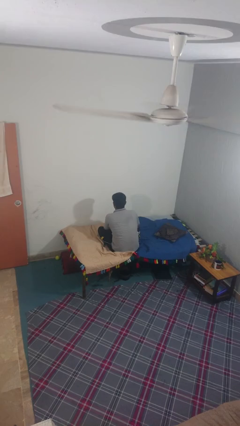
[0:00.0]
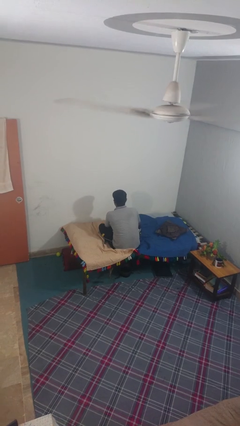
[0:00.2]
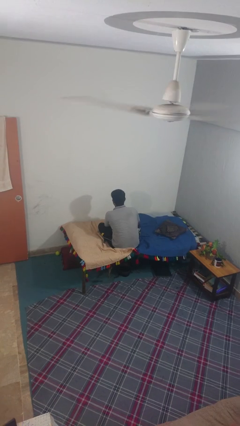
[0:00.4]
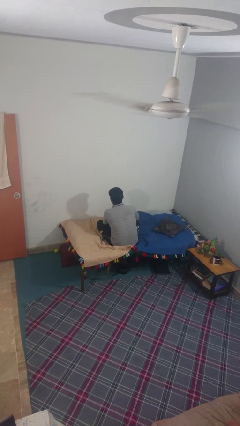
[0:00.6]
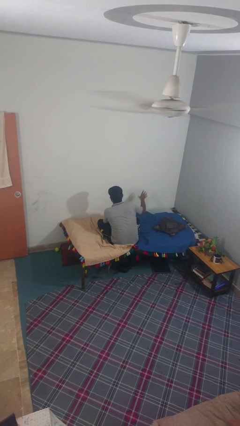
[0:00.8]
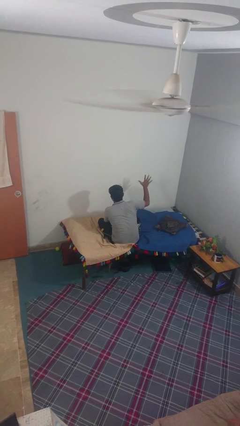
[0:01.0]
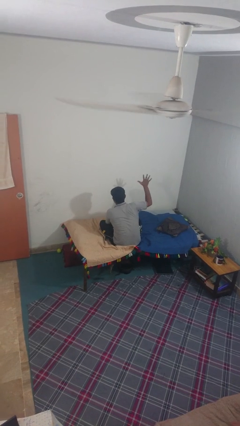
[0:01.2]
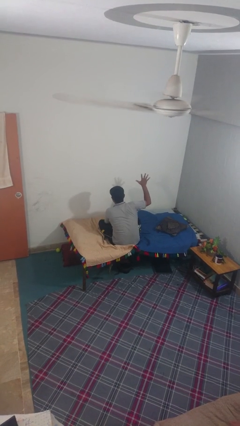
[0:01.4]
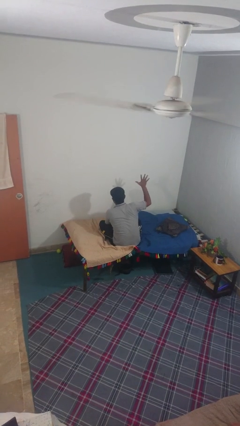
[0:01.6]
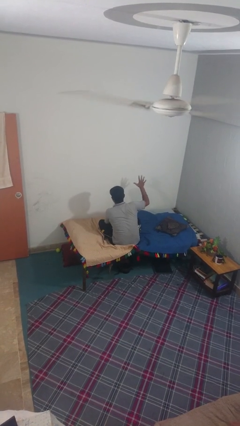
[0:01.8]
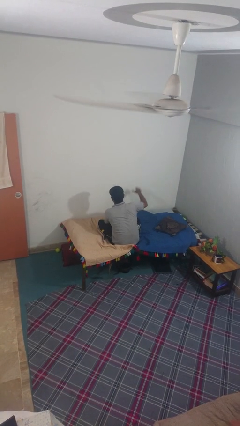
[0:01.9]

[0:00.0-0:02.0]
person gestures number five

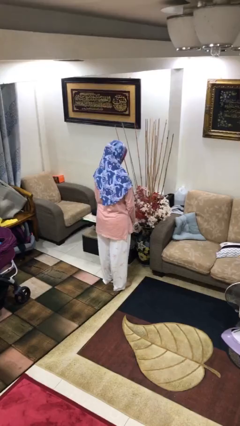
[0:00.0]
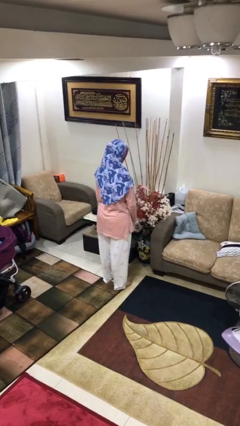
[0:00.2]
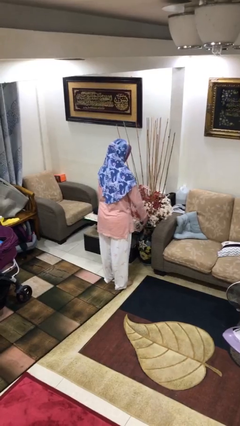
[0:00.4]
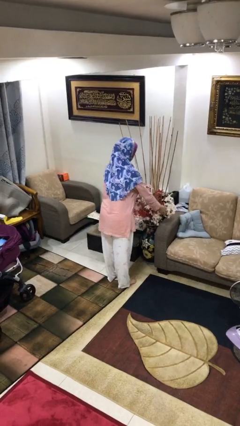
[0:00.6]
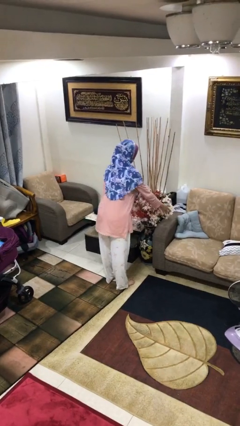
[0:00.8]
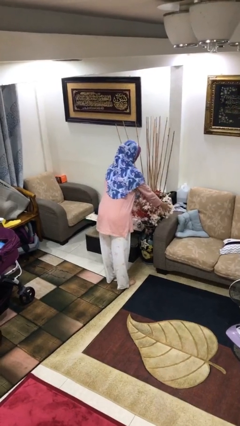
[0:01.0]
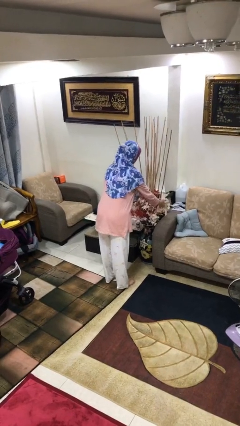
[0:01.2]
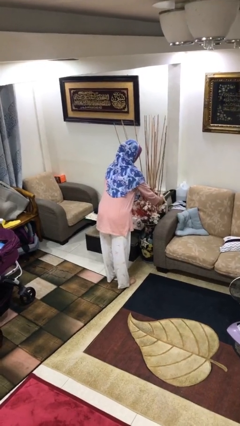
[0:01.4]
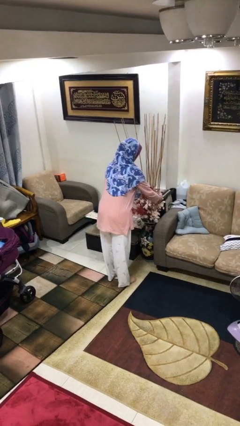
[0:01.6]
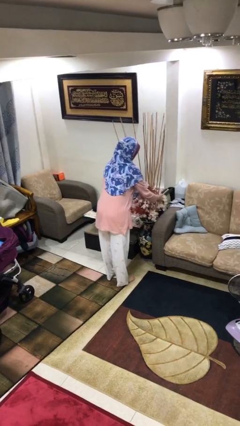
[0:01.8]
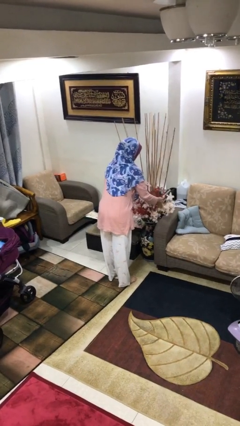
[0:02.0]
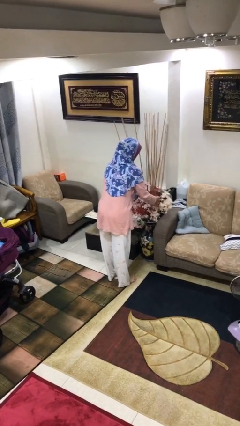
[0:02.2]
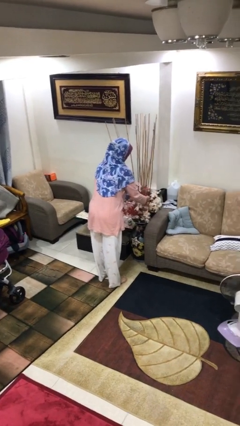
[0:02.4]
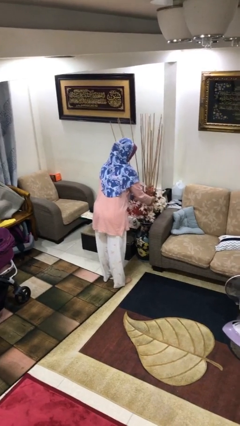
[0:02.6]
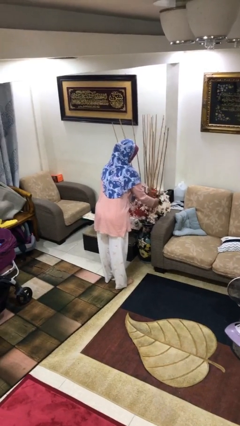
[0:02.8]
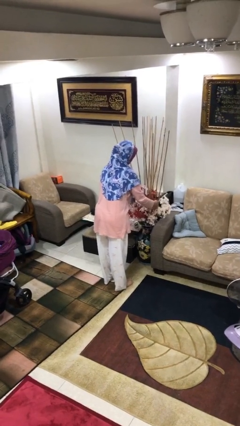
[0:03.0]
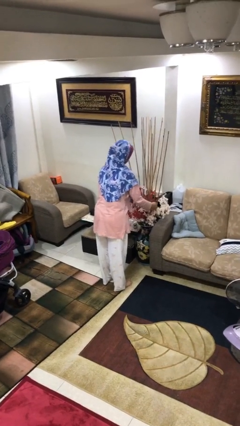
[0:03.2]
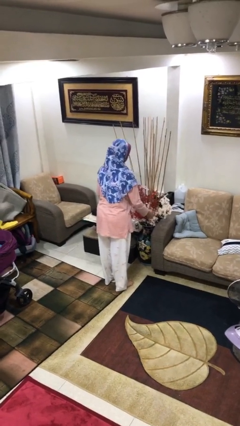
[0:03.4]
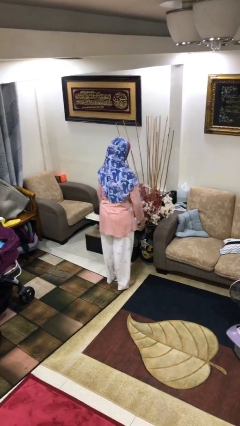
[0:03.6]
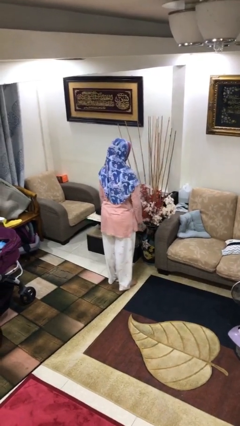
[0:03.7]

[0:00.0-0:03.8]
person arranges flowers in vase

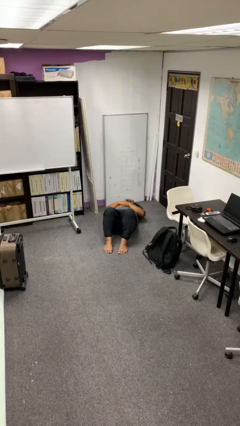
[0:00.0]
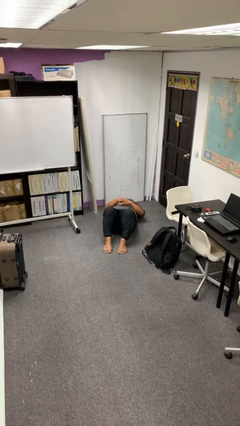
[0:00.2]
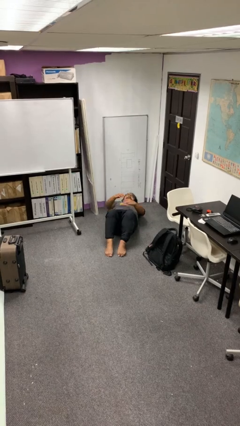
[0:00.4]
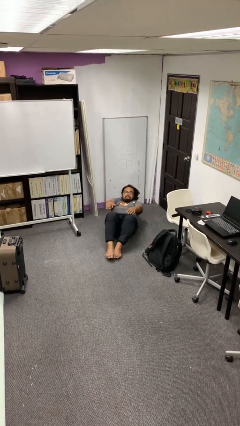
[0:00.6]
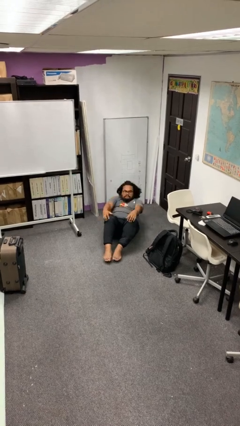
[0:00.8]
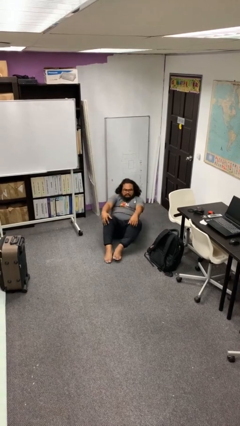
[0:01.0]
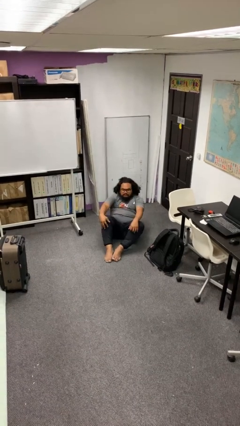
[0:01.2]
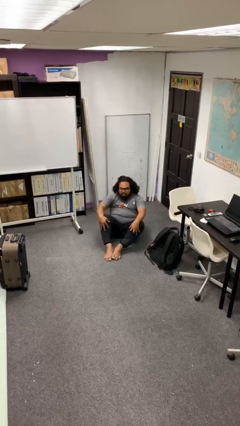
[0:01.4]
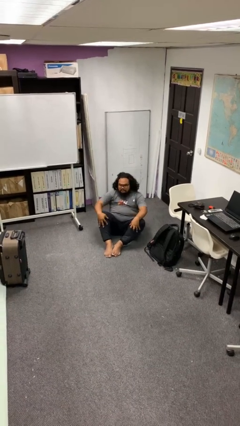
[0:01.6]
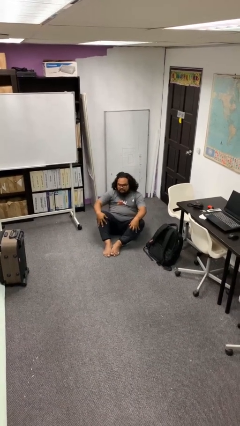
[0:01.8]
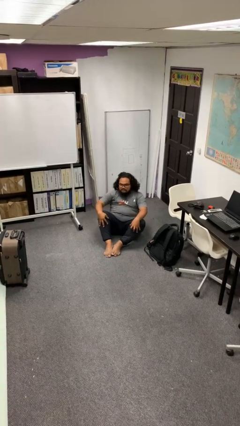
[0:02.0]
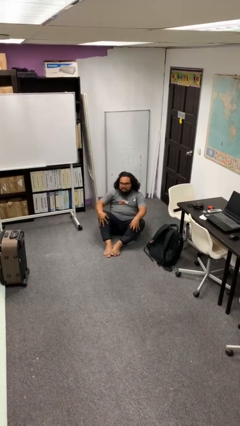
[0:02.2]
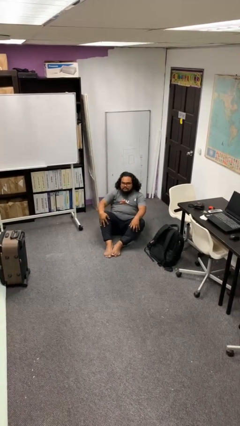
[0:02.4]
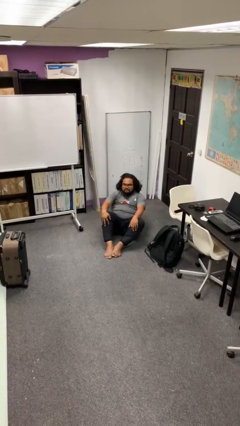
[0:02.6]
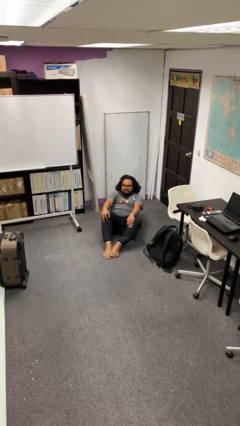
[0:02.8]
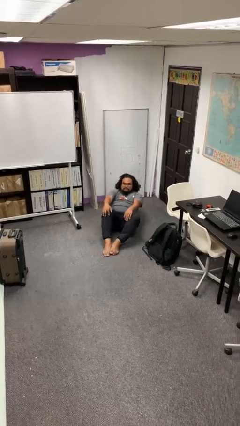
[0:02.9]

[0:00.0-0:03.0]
person exercises with situp

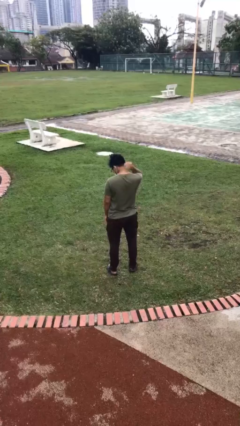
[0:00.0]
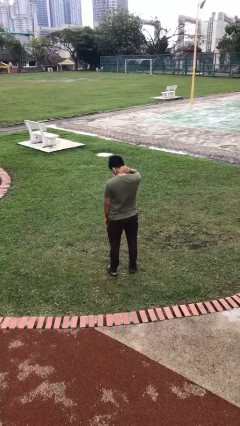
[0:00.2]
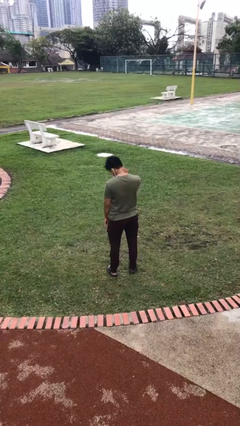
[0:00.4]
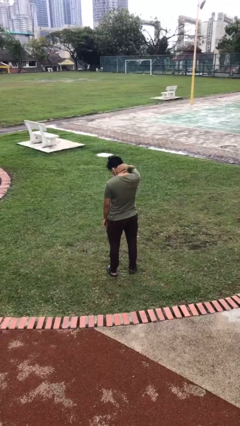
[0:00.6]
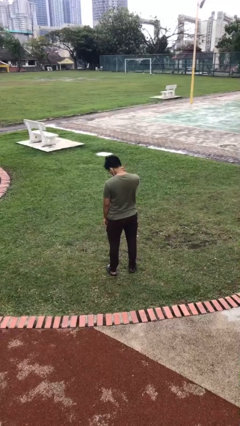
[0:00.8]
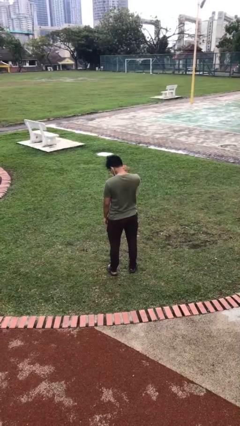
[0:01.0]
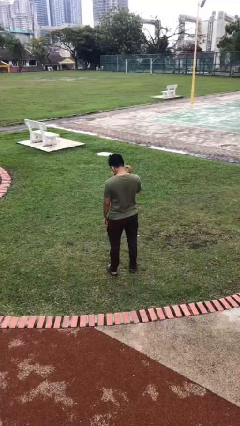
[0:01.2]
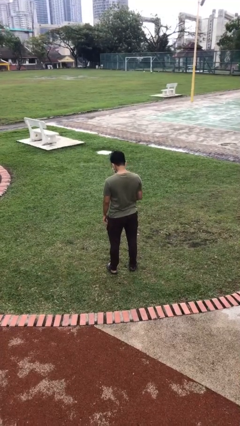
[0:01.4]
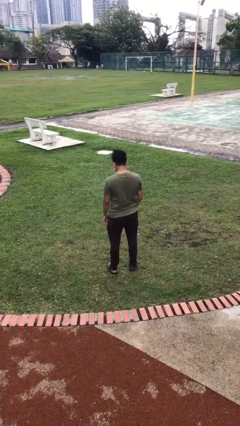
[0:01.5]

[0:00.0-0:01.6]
person rubs neck

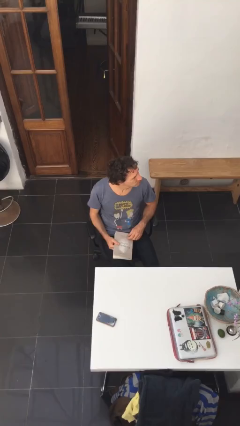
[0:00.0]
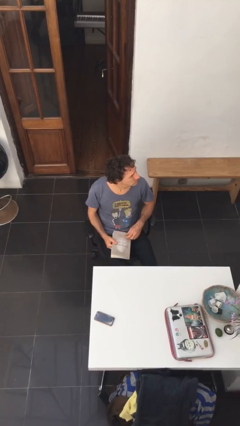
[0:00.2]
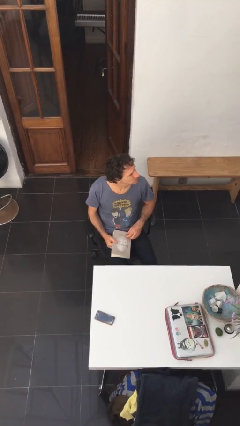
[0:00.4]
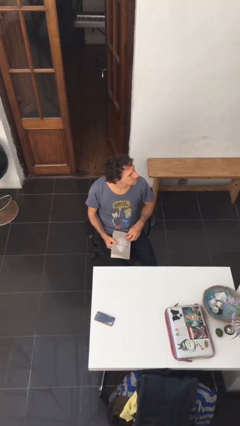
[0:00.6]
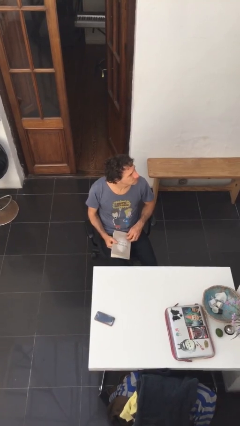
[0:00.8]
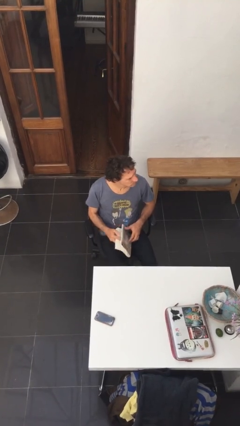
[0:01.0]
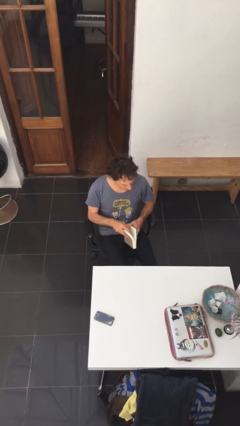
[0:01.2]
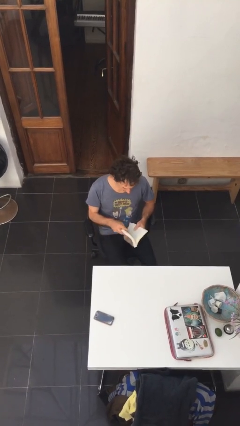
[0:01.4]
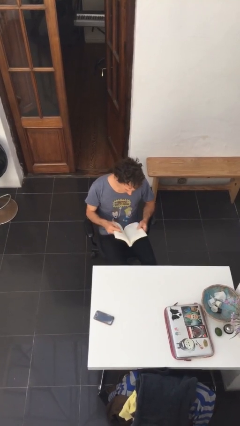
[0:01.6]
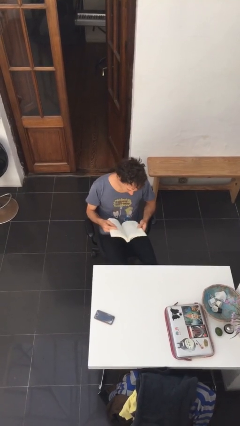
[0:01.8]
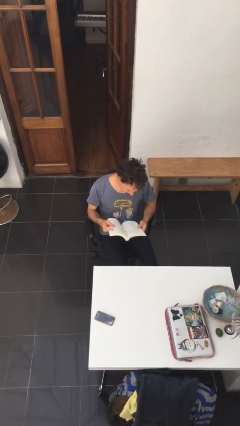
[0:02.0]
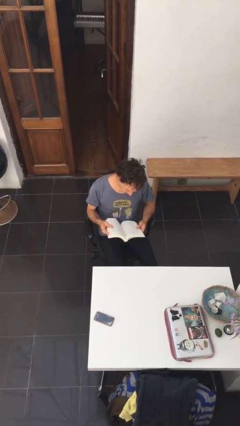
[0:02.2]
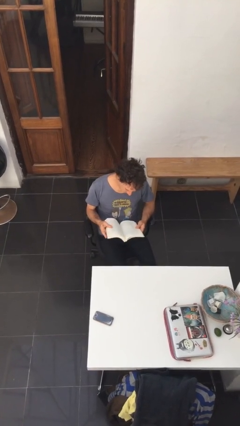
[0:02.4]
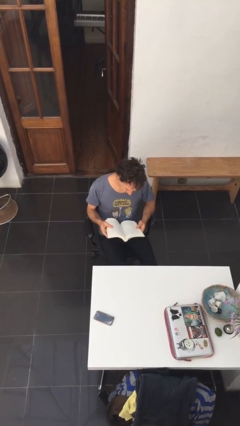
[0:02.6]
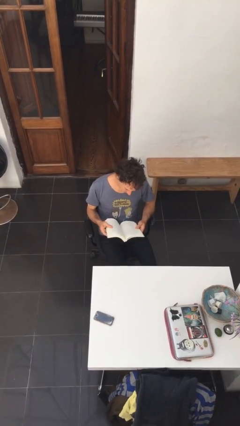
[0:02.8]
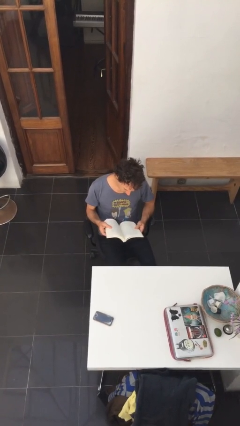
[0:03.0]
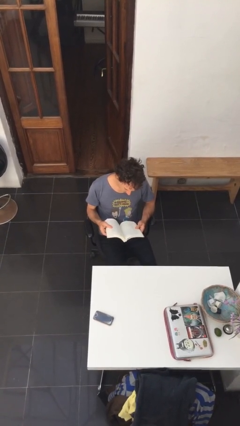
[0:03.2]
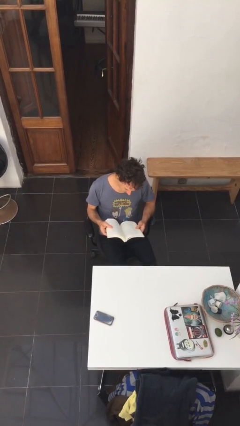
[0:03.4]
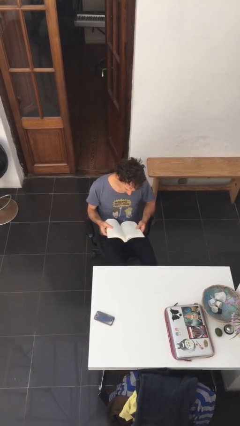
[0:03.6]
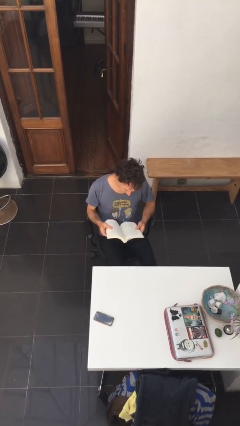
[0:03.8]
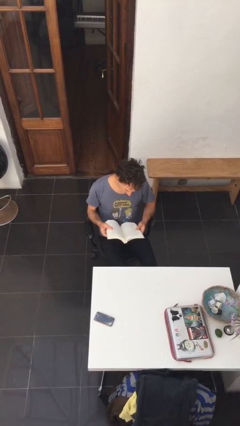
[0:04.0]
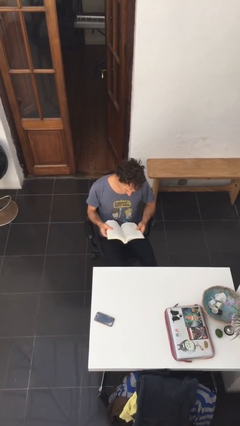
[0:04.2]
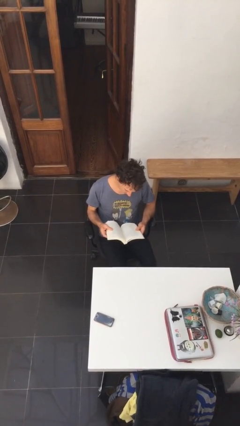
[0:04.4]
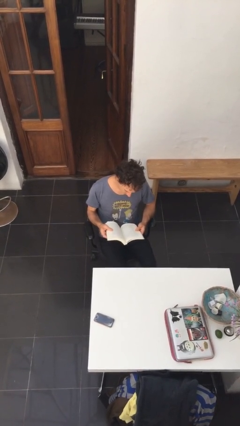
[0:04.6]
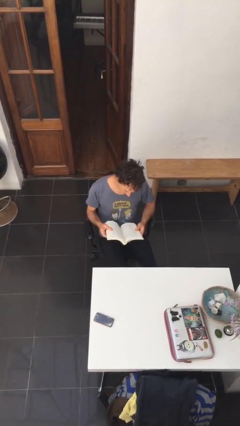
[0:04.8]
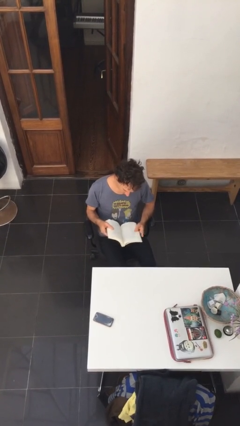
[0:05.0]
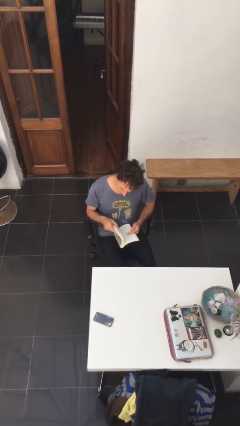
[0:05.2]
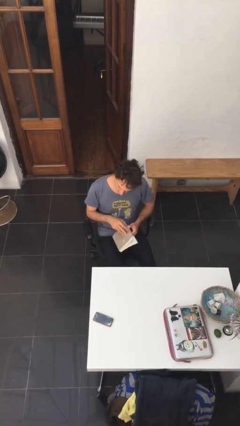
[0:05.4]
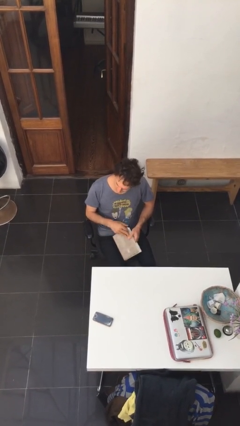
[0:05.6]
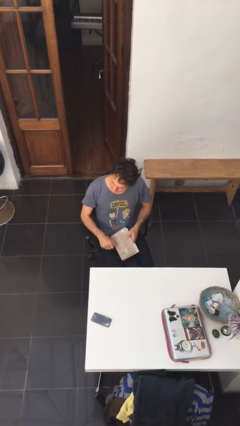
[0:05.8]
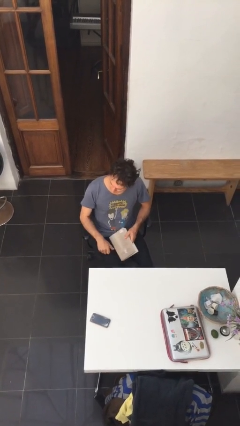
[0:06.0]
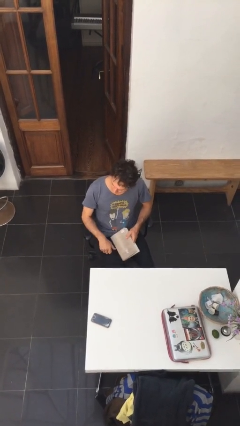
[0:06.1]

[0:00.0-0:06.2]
person reads document

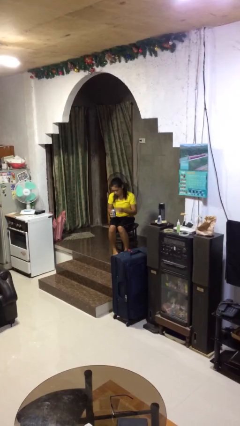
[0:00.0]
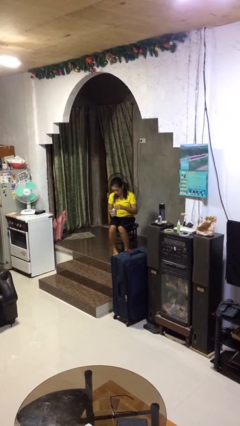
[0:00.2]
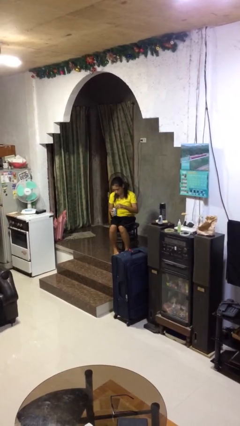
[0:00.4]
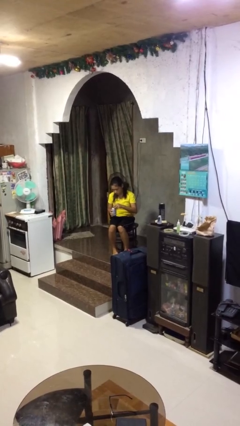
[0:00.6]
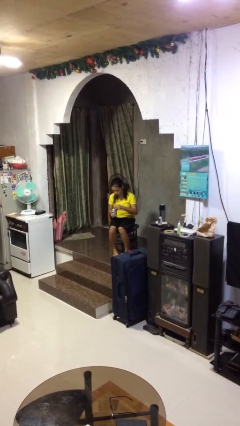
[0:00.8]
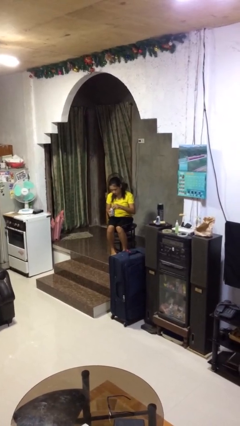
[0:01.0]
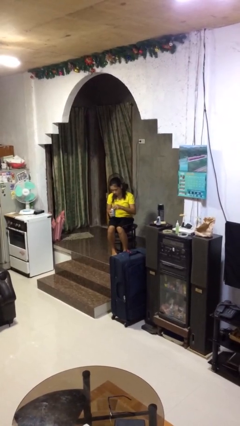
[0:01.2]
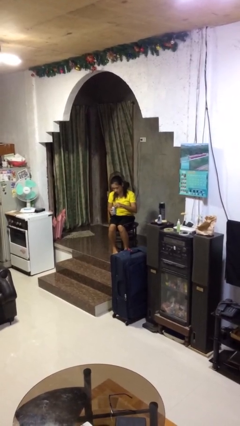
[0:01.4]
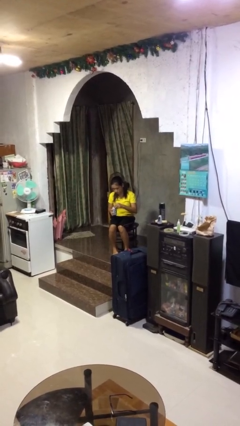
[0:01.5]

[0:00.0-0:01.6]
person opens beverage can
